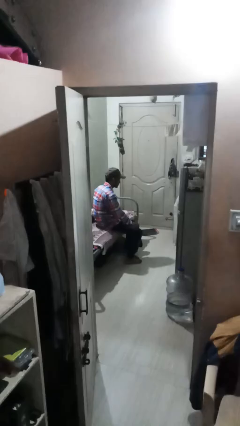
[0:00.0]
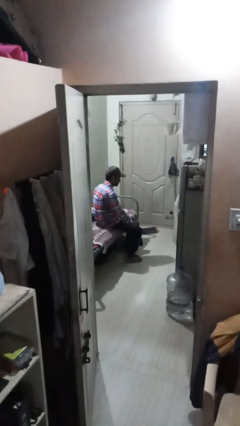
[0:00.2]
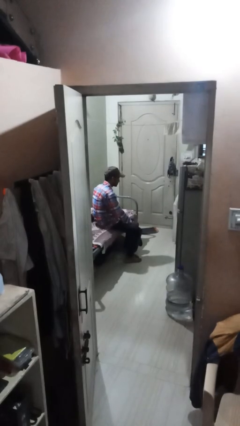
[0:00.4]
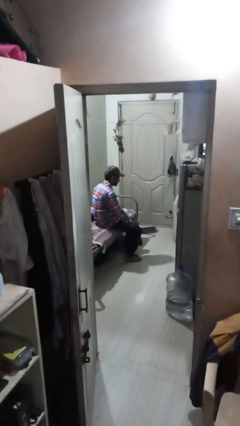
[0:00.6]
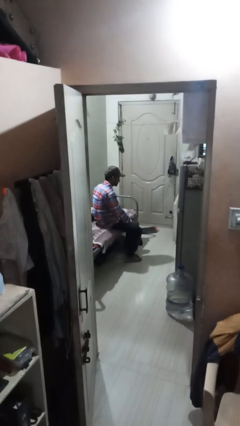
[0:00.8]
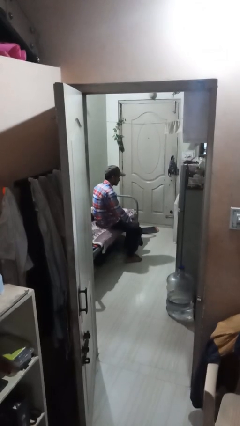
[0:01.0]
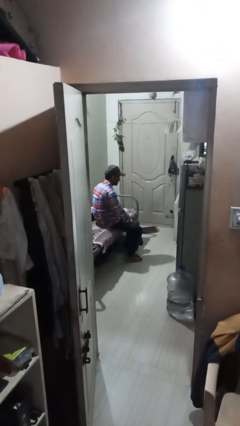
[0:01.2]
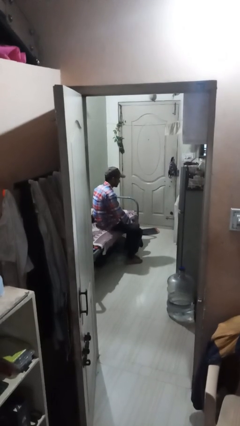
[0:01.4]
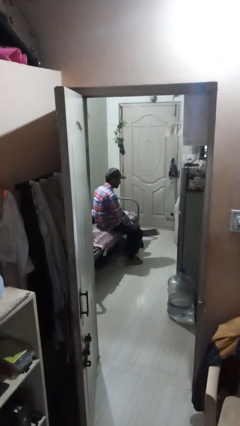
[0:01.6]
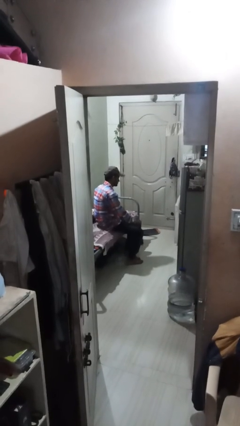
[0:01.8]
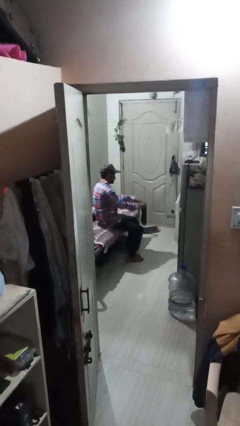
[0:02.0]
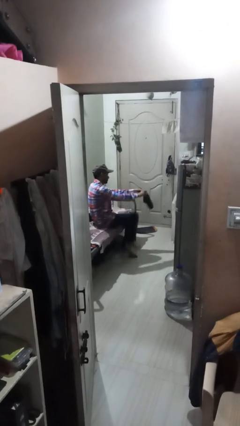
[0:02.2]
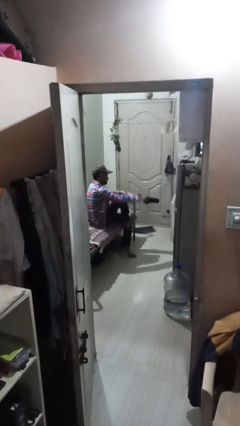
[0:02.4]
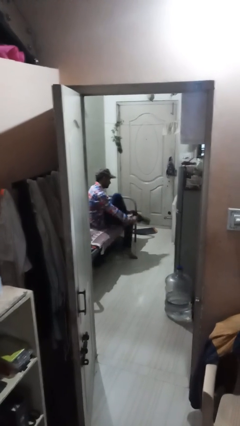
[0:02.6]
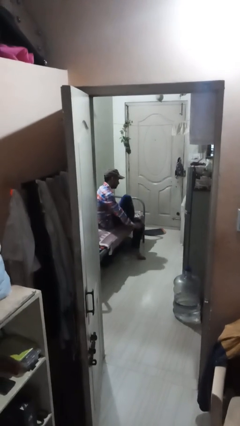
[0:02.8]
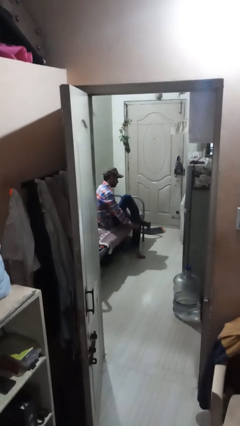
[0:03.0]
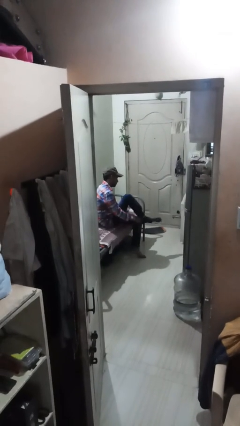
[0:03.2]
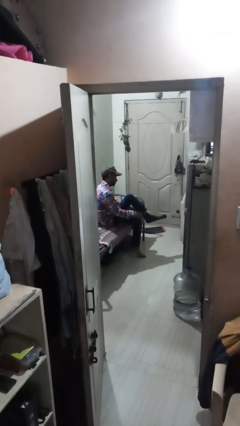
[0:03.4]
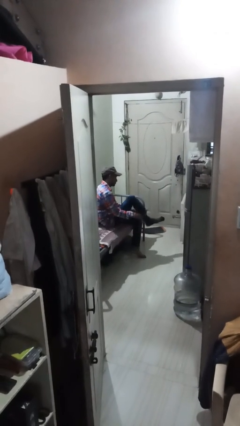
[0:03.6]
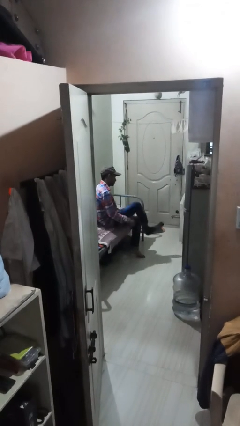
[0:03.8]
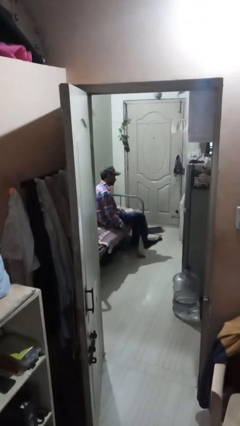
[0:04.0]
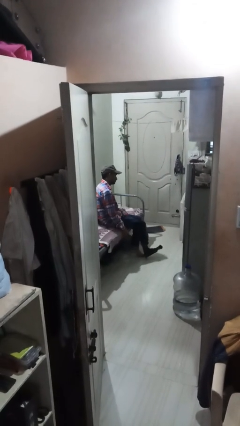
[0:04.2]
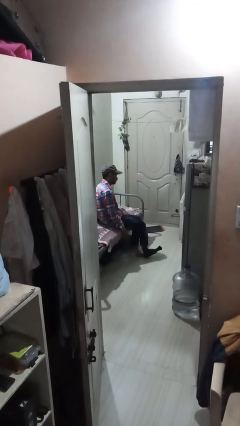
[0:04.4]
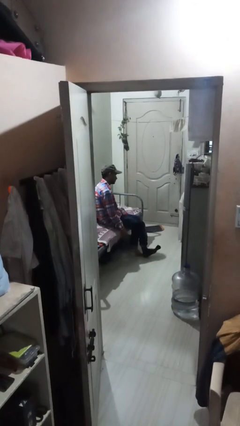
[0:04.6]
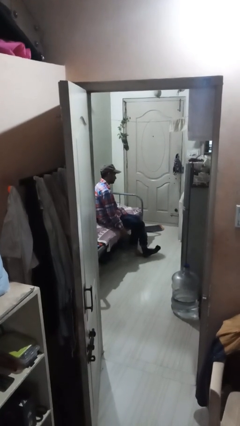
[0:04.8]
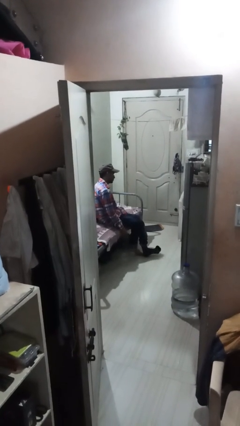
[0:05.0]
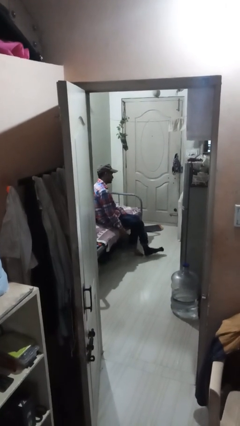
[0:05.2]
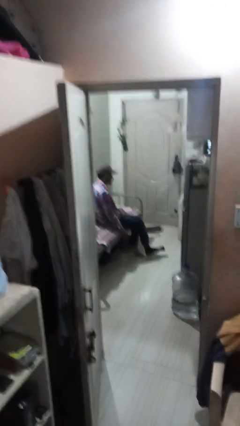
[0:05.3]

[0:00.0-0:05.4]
person puts on socks

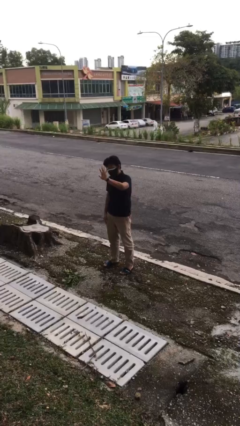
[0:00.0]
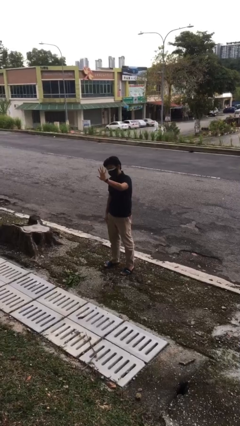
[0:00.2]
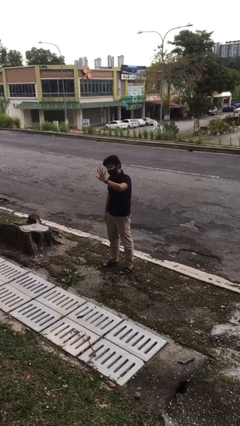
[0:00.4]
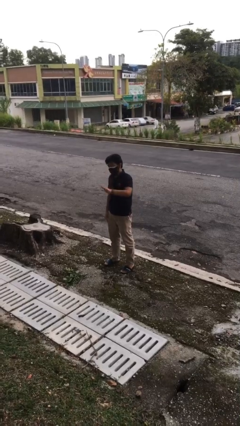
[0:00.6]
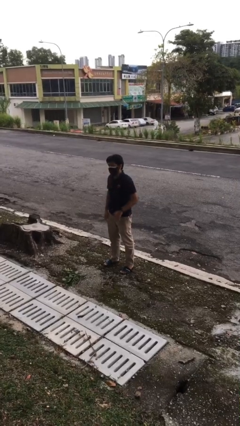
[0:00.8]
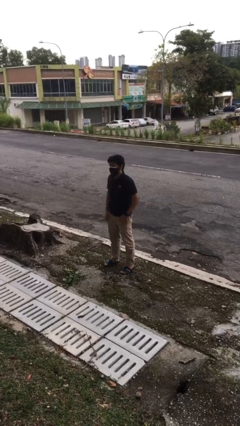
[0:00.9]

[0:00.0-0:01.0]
person gestures number five

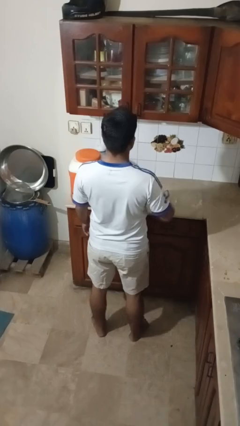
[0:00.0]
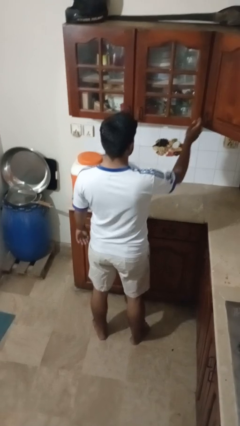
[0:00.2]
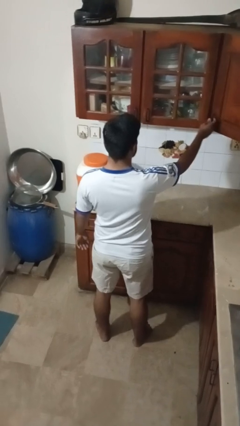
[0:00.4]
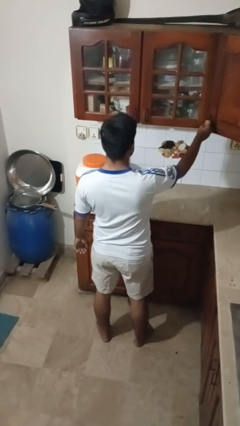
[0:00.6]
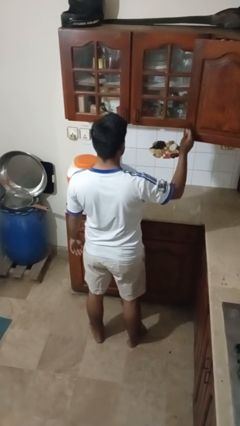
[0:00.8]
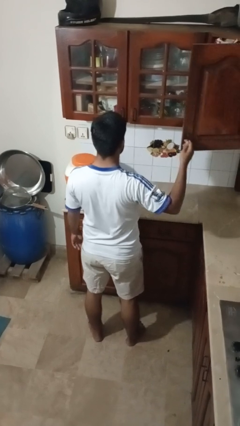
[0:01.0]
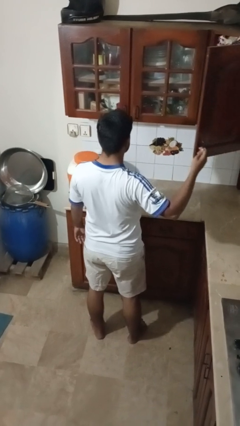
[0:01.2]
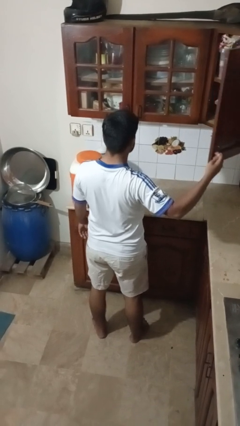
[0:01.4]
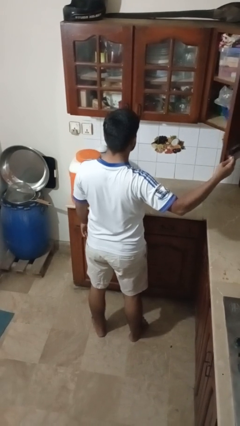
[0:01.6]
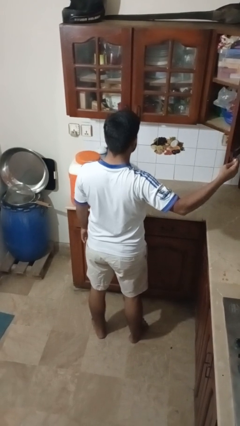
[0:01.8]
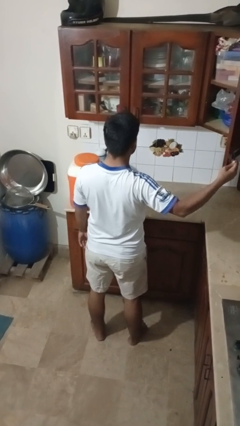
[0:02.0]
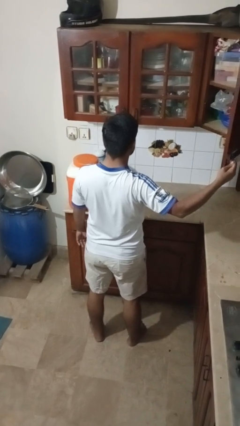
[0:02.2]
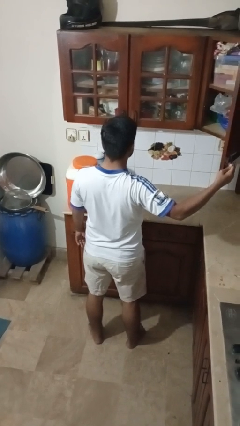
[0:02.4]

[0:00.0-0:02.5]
person opens cabinet

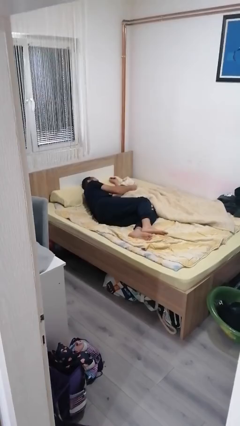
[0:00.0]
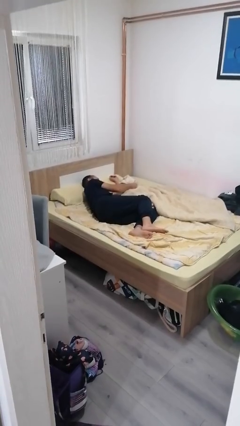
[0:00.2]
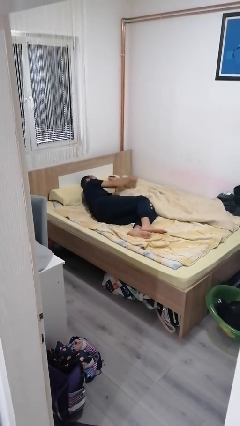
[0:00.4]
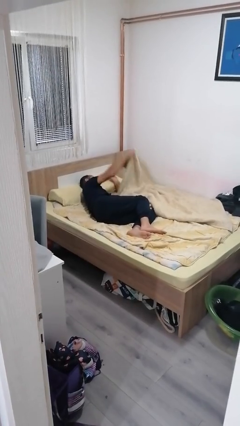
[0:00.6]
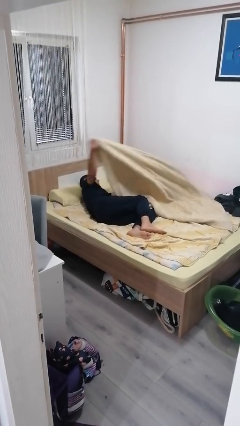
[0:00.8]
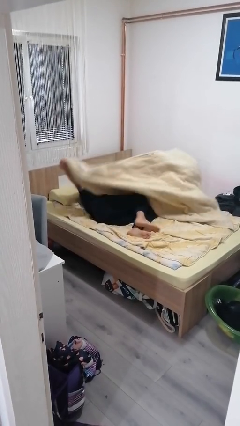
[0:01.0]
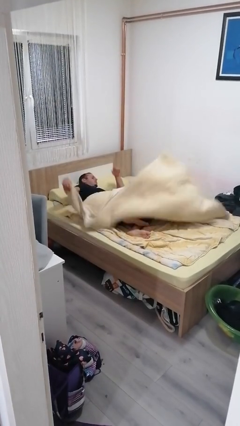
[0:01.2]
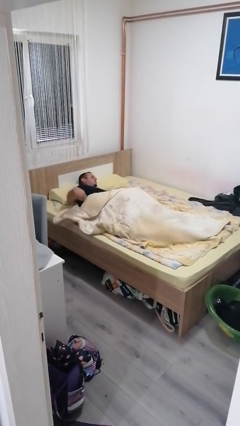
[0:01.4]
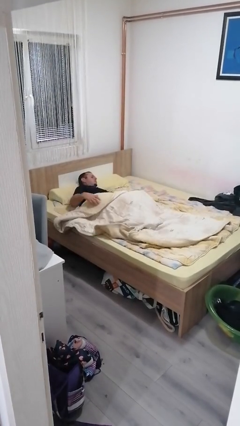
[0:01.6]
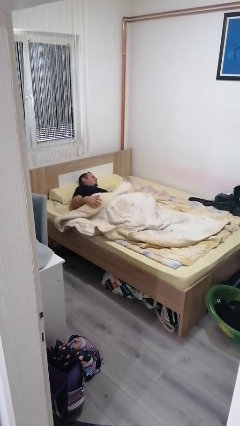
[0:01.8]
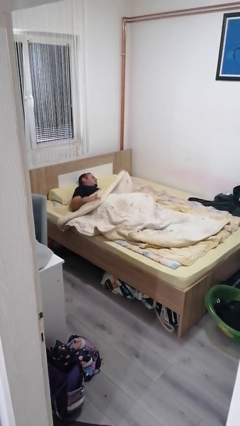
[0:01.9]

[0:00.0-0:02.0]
person covers with bedsheets

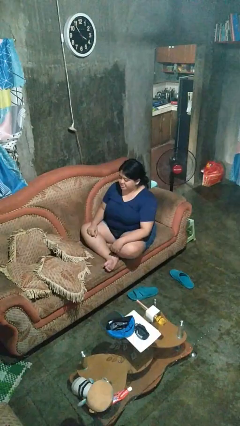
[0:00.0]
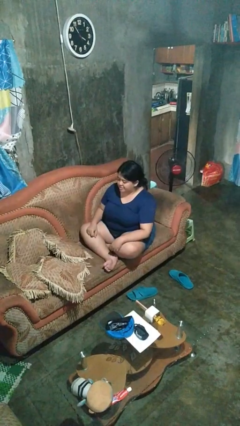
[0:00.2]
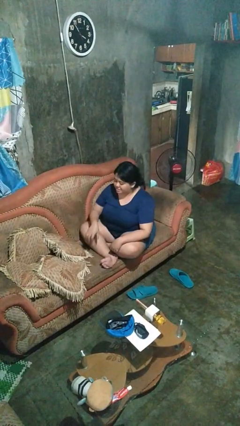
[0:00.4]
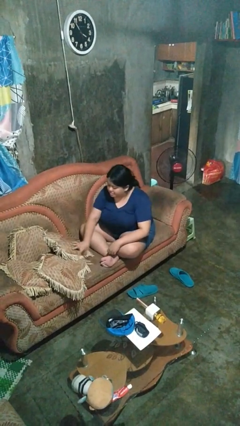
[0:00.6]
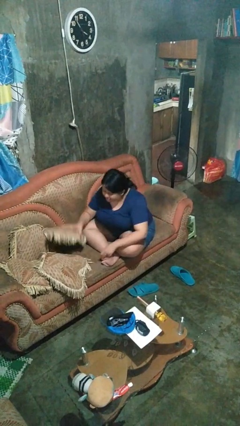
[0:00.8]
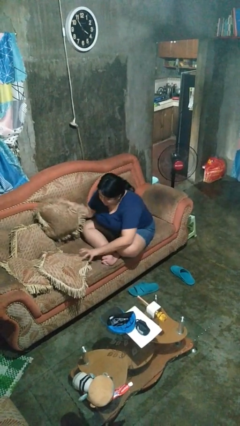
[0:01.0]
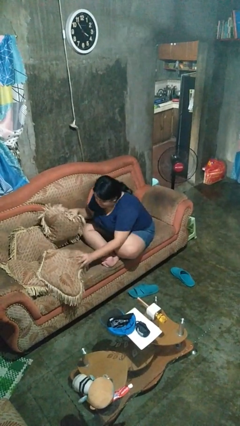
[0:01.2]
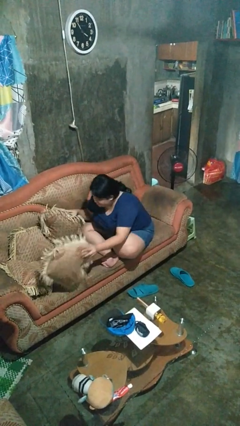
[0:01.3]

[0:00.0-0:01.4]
person searches in couch

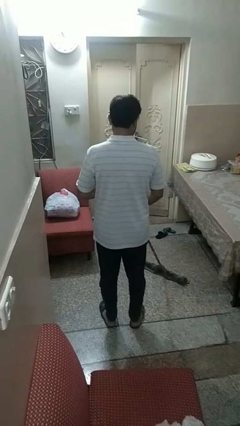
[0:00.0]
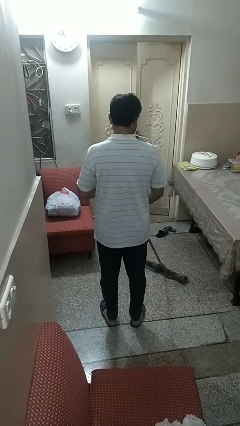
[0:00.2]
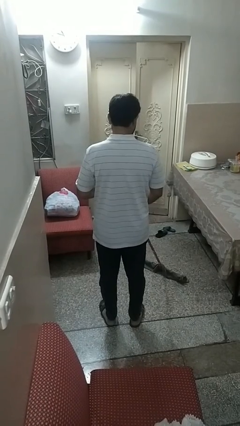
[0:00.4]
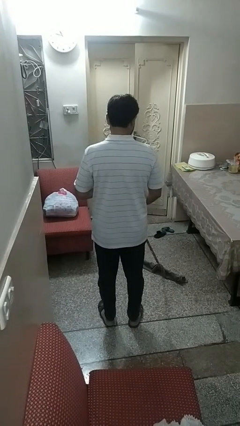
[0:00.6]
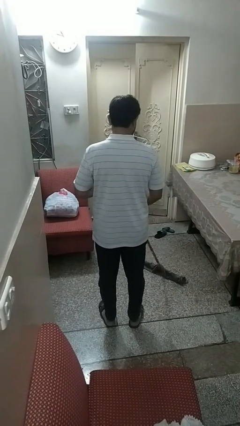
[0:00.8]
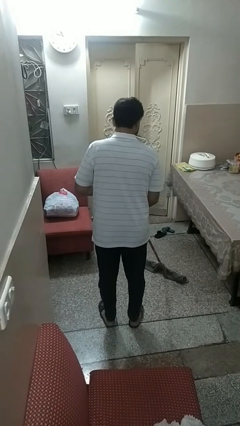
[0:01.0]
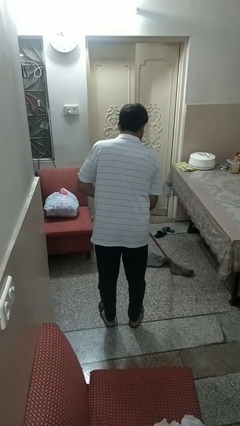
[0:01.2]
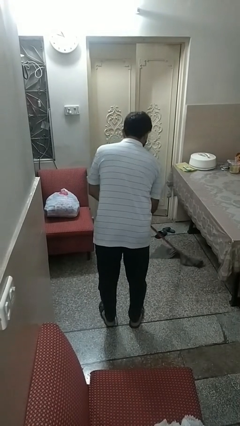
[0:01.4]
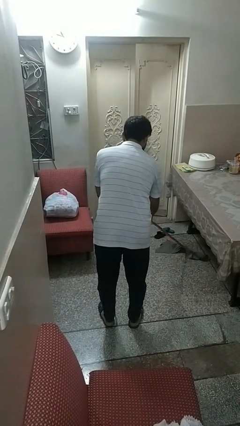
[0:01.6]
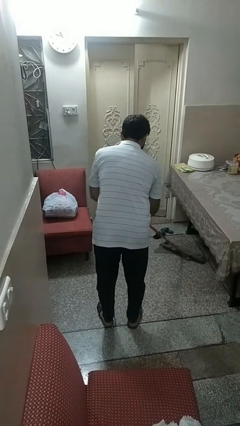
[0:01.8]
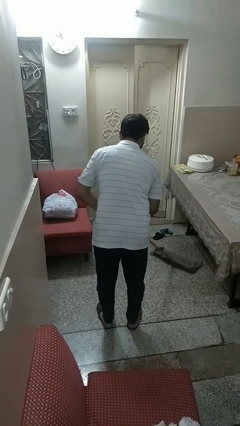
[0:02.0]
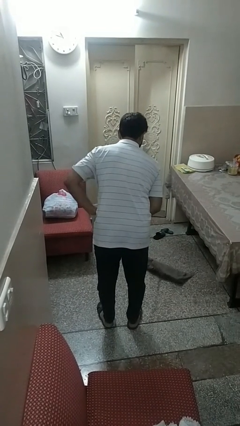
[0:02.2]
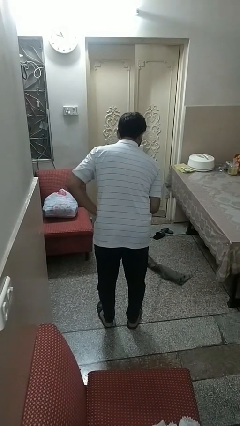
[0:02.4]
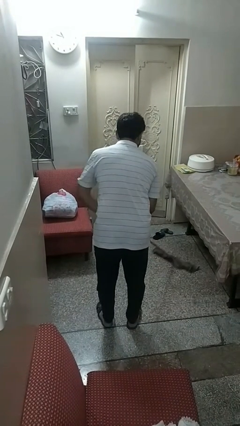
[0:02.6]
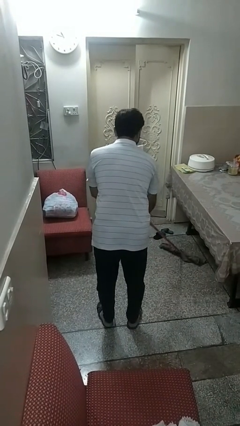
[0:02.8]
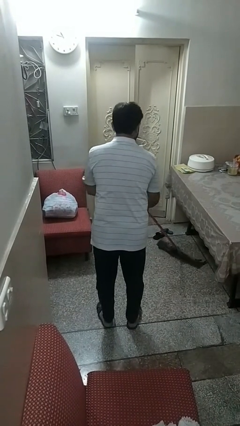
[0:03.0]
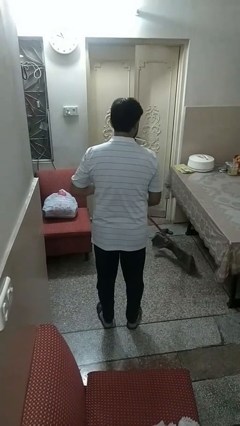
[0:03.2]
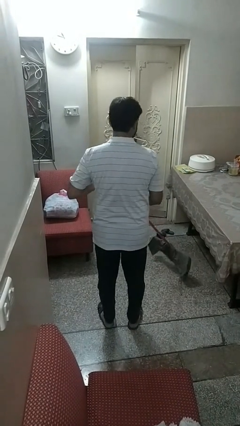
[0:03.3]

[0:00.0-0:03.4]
person mops

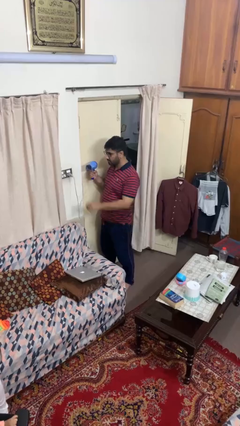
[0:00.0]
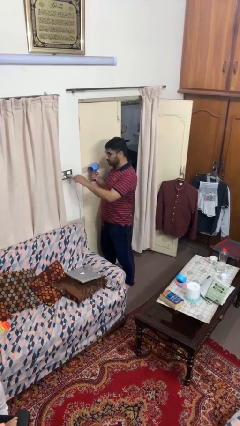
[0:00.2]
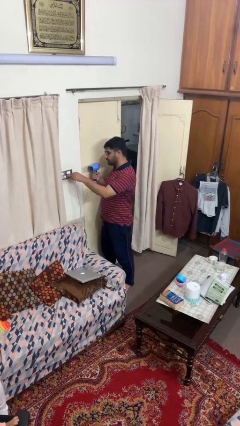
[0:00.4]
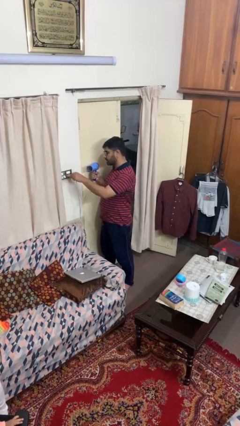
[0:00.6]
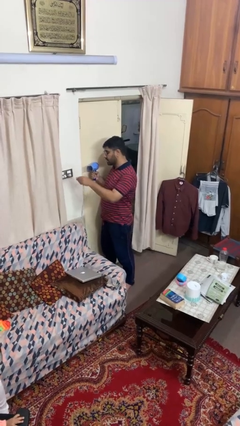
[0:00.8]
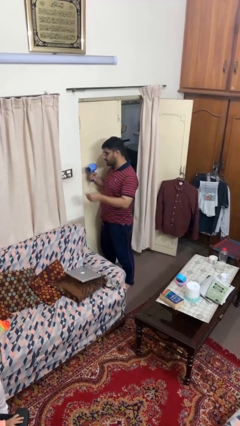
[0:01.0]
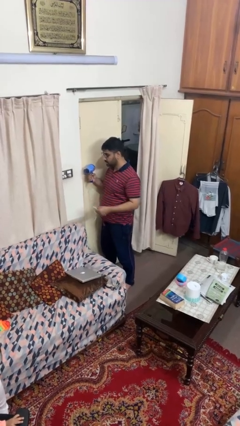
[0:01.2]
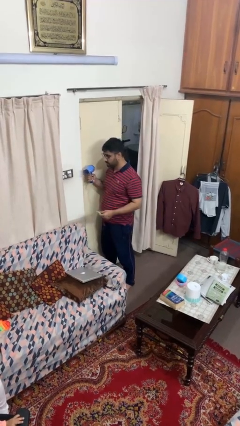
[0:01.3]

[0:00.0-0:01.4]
person unplugs from electrical socket
